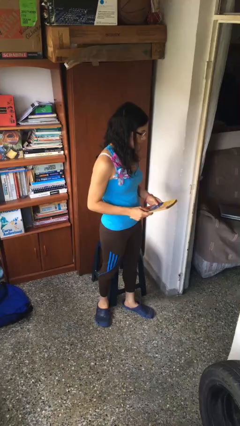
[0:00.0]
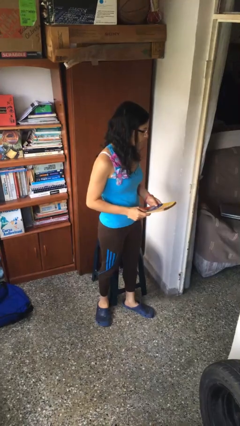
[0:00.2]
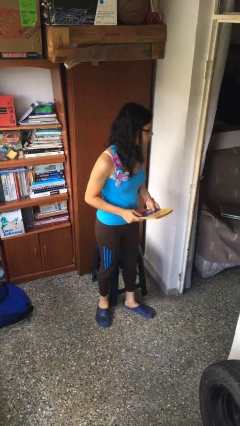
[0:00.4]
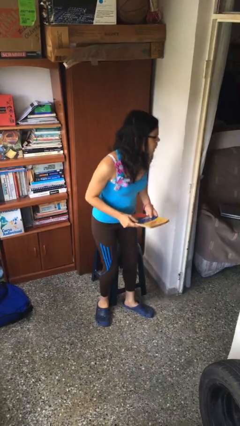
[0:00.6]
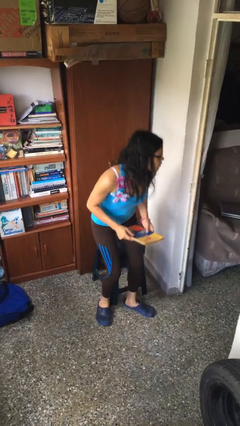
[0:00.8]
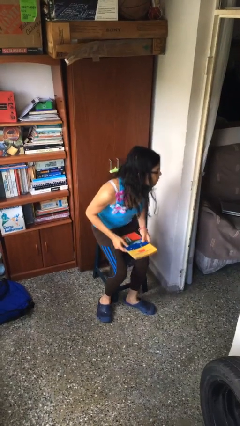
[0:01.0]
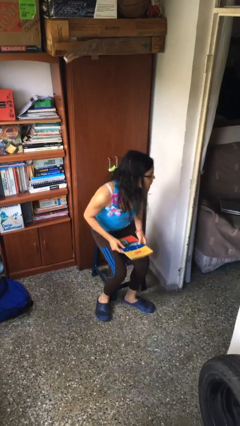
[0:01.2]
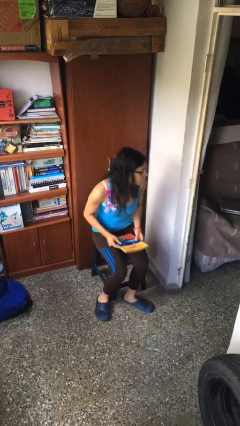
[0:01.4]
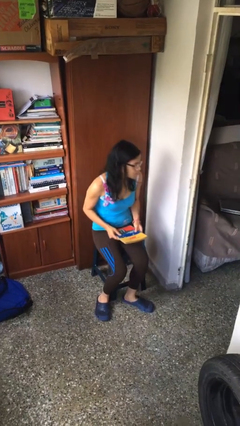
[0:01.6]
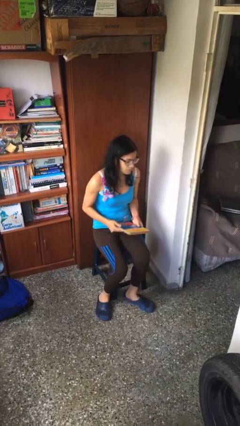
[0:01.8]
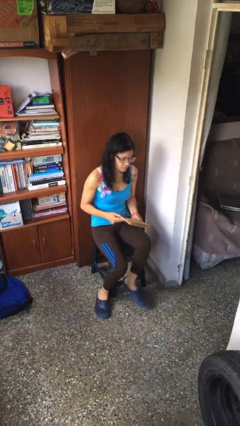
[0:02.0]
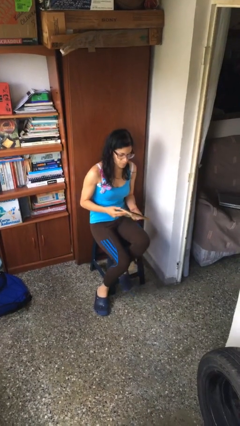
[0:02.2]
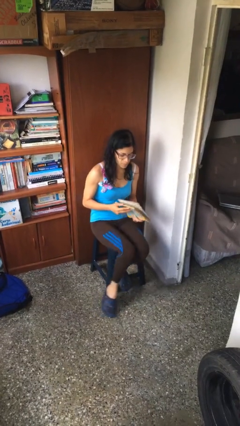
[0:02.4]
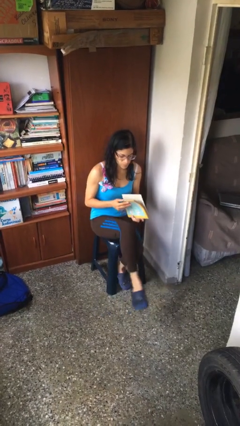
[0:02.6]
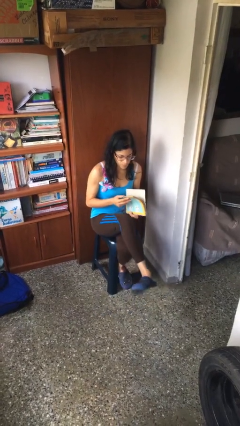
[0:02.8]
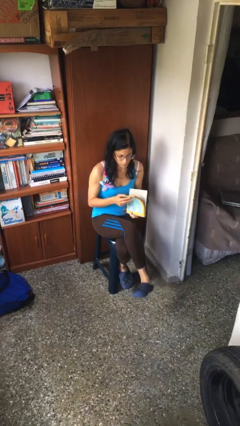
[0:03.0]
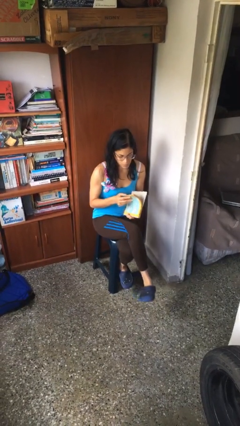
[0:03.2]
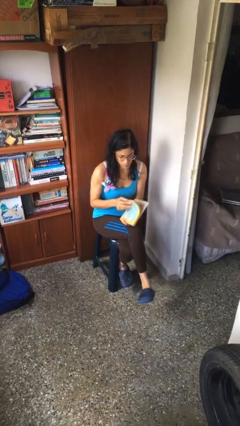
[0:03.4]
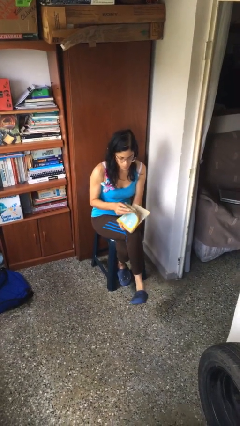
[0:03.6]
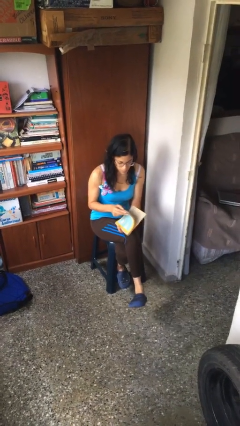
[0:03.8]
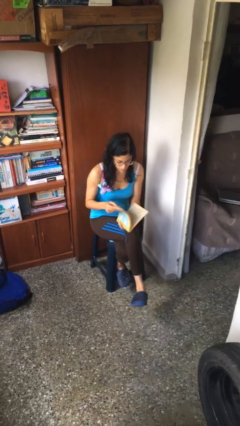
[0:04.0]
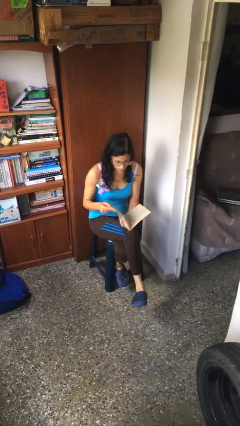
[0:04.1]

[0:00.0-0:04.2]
person sits down

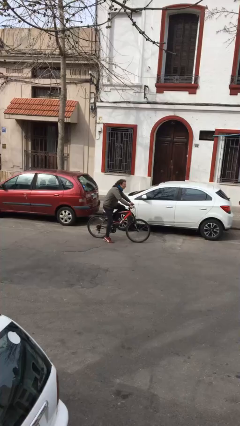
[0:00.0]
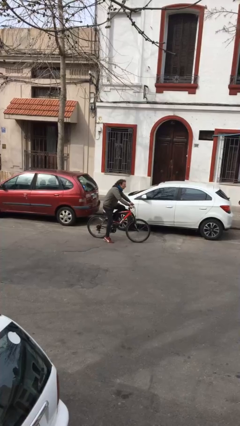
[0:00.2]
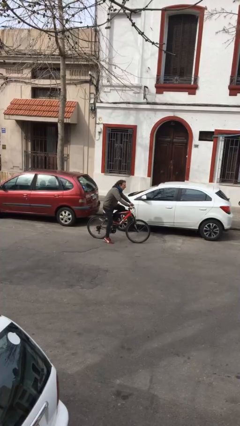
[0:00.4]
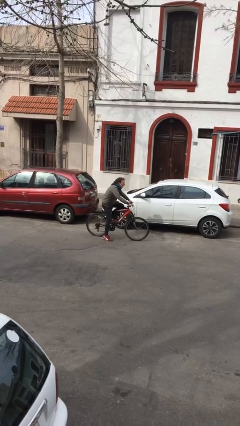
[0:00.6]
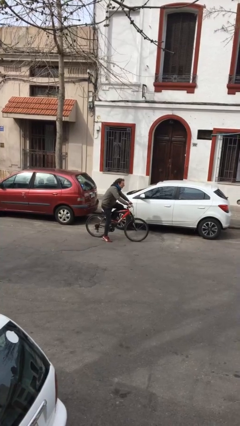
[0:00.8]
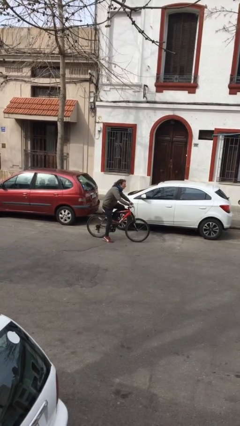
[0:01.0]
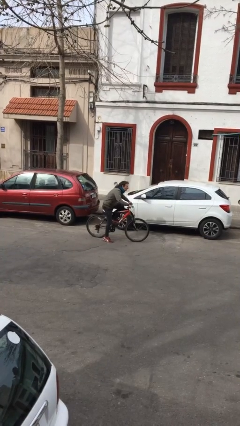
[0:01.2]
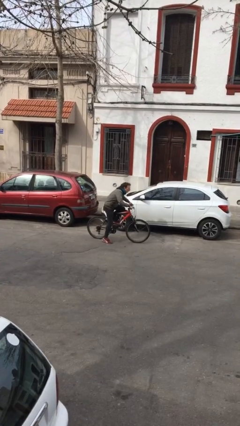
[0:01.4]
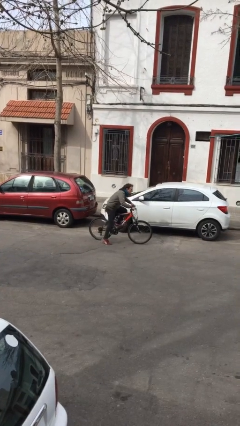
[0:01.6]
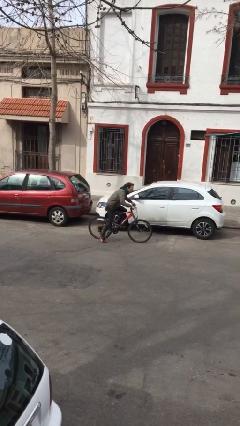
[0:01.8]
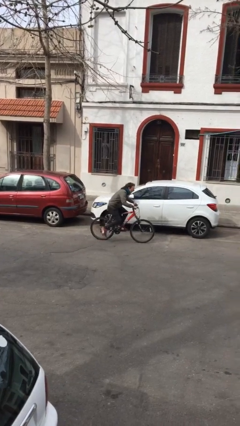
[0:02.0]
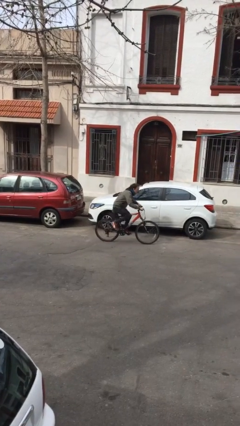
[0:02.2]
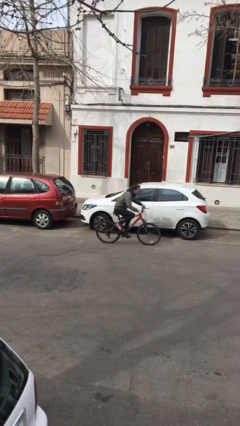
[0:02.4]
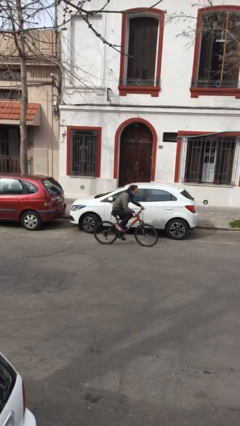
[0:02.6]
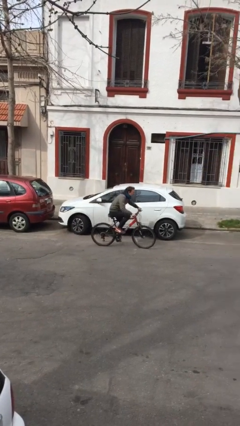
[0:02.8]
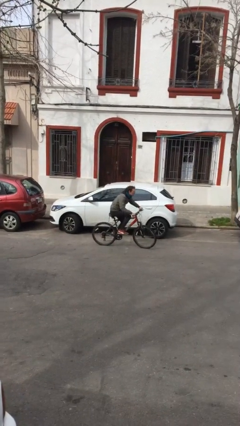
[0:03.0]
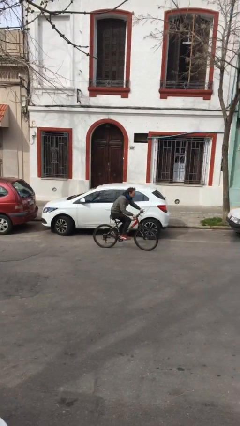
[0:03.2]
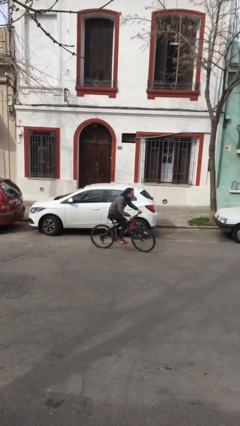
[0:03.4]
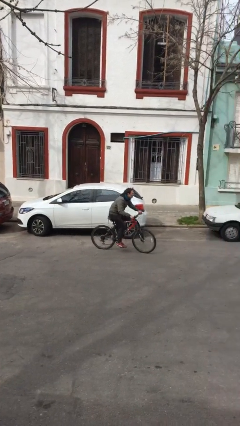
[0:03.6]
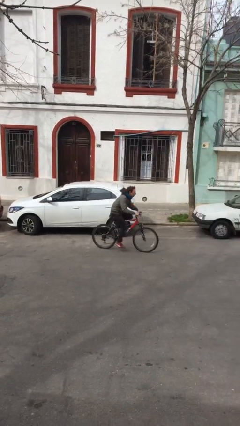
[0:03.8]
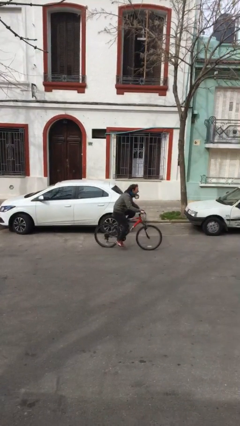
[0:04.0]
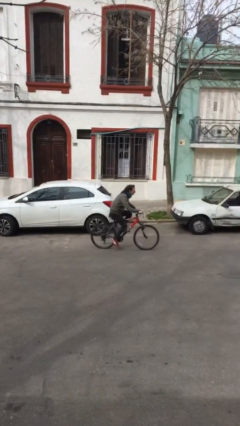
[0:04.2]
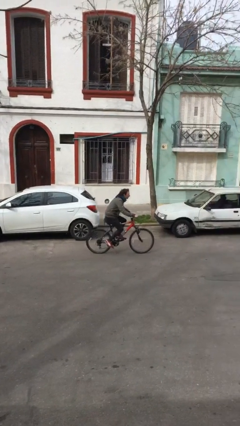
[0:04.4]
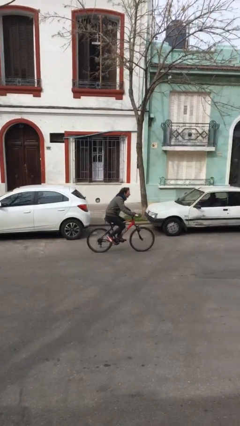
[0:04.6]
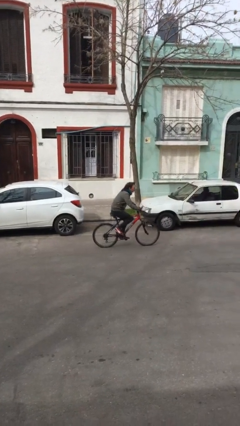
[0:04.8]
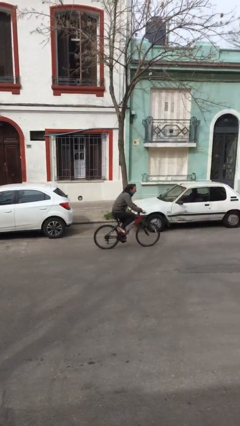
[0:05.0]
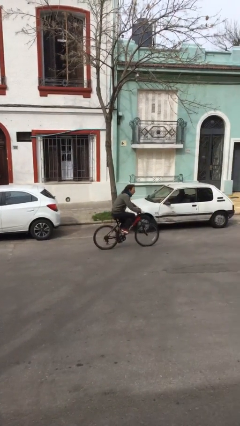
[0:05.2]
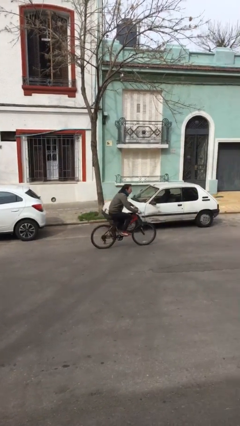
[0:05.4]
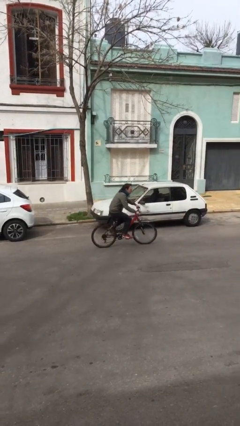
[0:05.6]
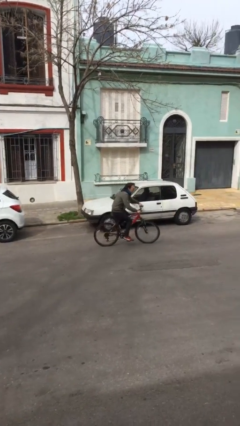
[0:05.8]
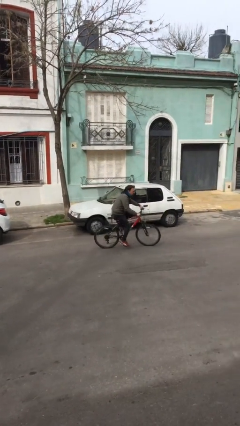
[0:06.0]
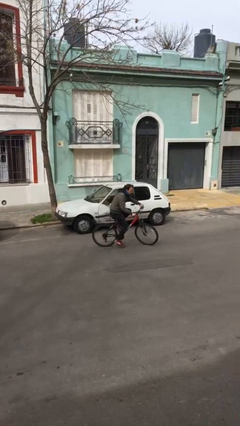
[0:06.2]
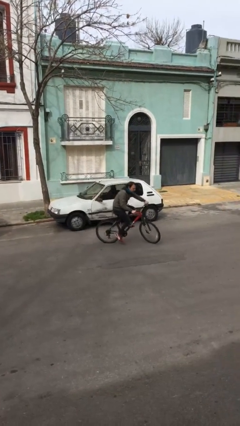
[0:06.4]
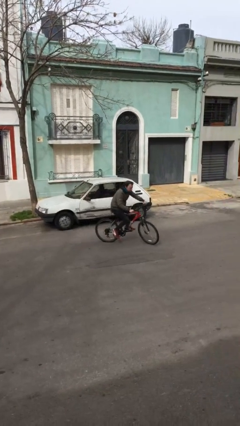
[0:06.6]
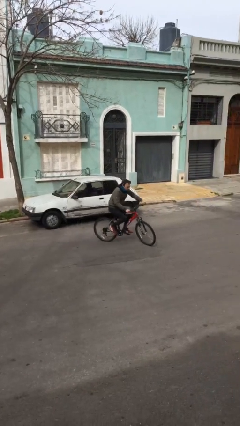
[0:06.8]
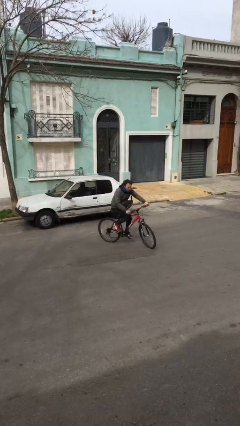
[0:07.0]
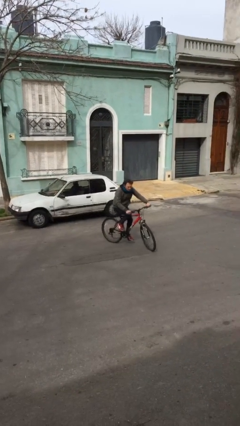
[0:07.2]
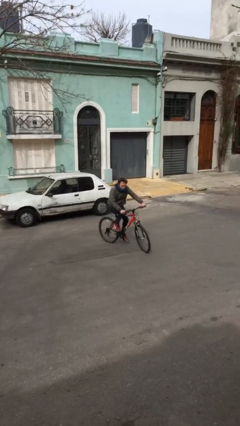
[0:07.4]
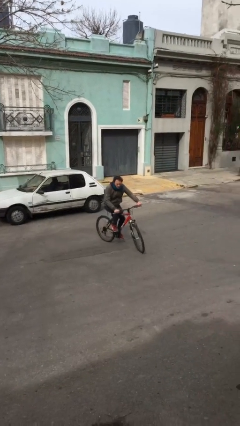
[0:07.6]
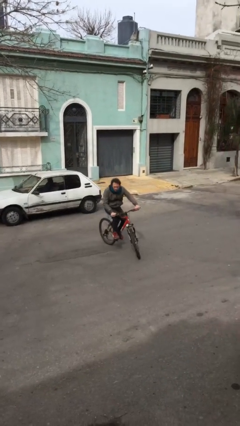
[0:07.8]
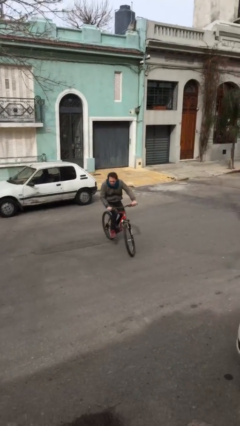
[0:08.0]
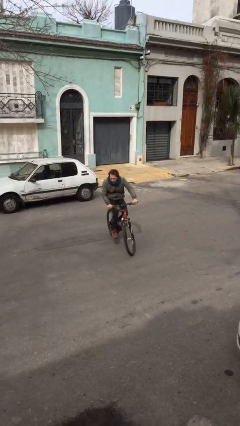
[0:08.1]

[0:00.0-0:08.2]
person rides bicycle

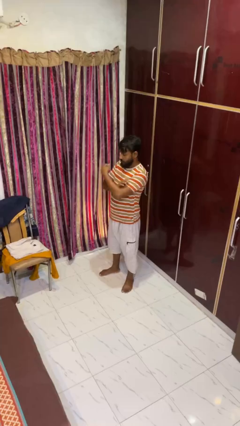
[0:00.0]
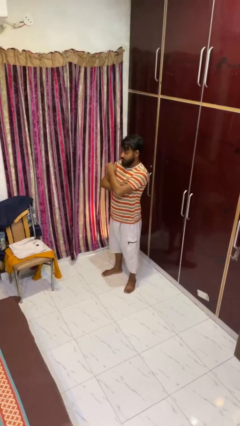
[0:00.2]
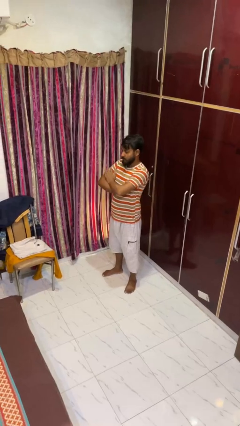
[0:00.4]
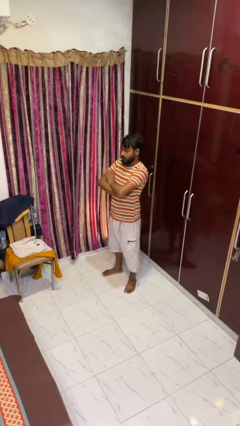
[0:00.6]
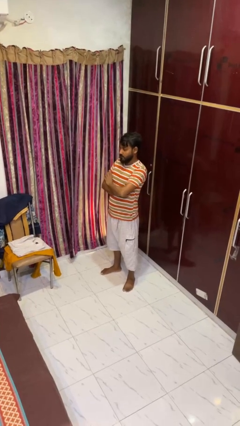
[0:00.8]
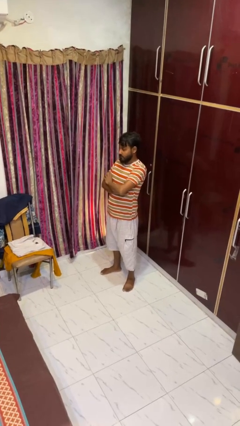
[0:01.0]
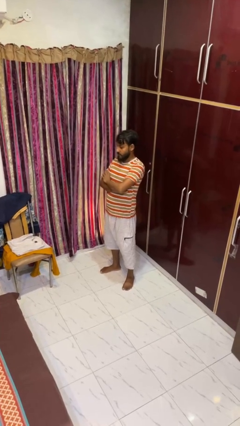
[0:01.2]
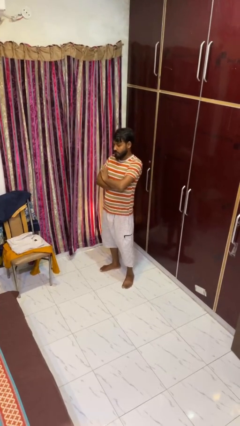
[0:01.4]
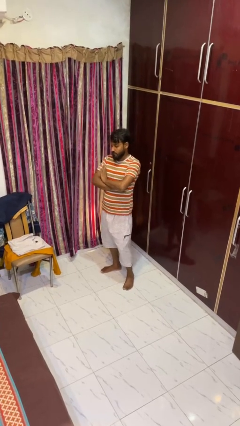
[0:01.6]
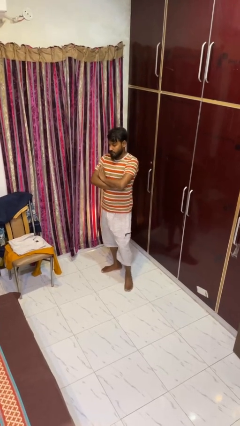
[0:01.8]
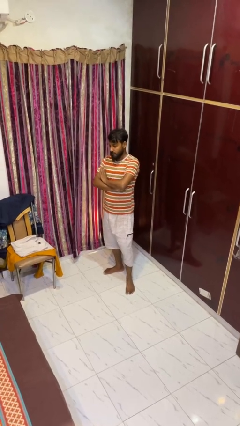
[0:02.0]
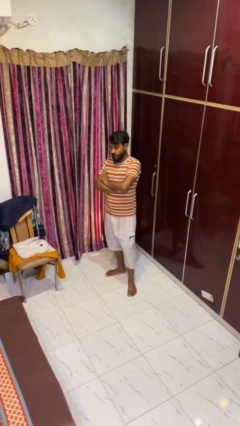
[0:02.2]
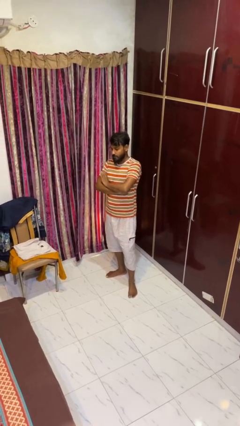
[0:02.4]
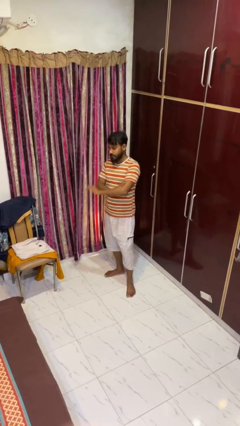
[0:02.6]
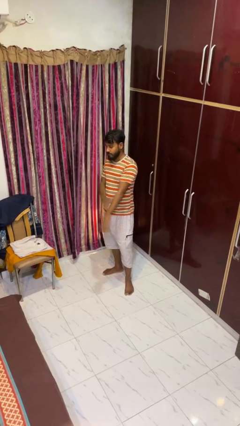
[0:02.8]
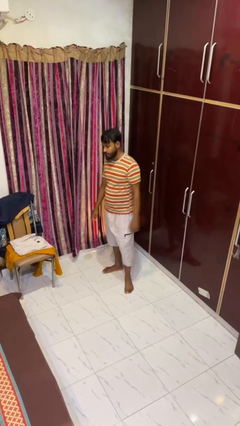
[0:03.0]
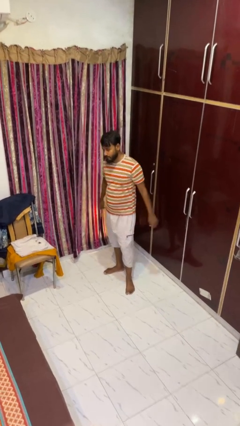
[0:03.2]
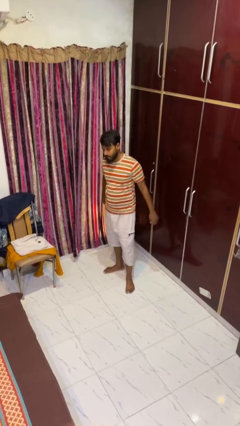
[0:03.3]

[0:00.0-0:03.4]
person crosses arms

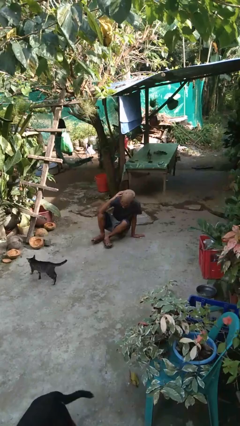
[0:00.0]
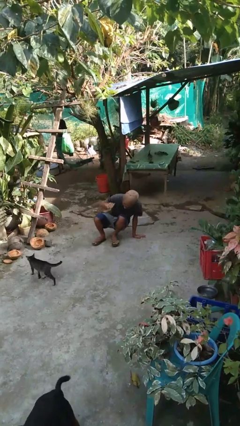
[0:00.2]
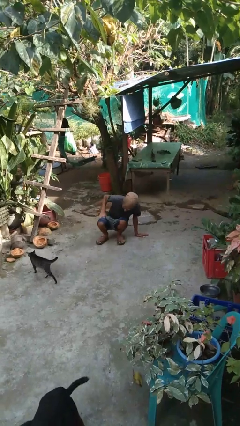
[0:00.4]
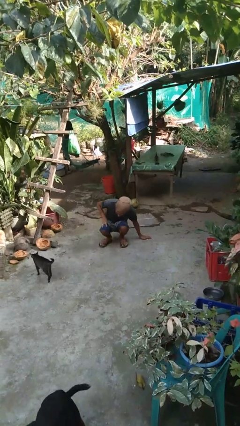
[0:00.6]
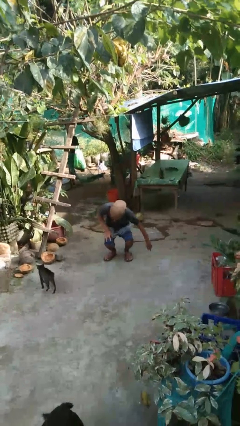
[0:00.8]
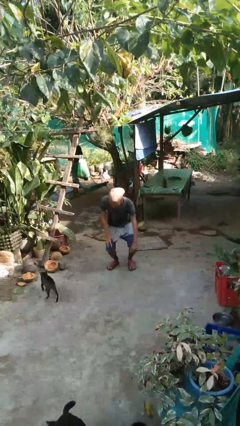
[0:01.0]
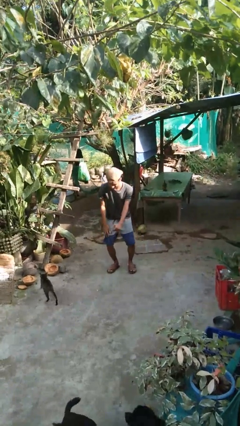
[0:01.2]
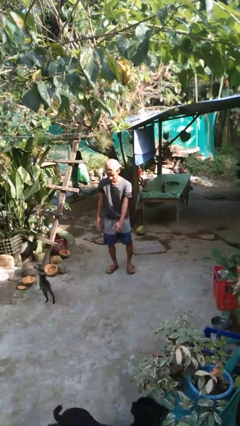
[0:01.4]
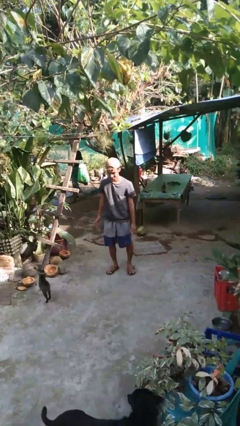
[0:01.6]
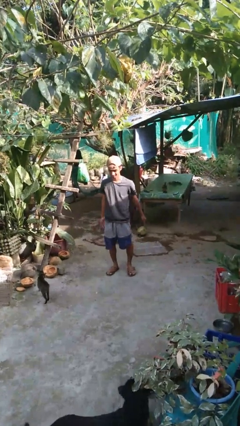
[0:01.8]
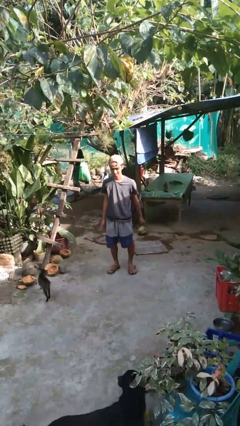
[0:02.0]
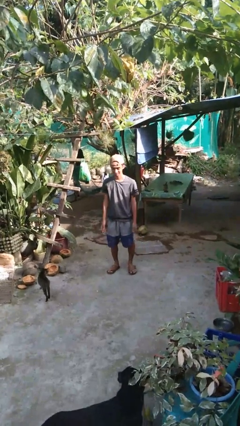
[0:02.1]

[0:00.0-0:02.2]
person stands up from floor
